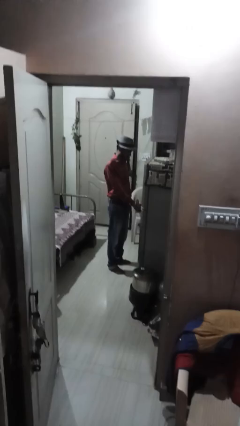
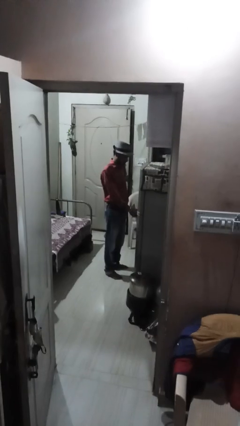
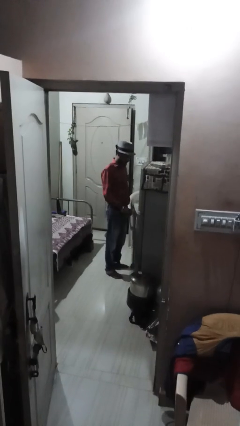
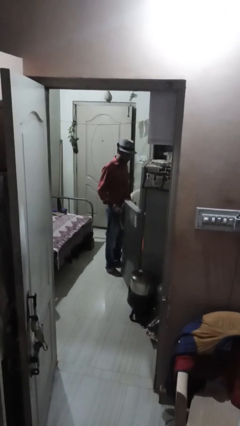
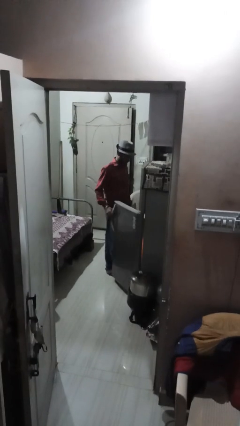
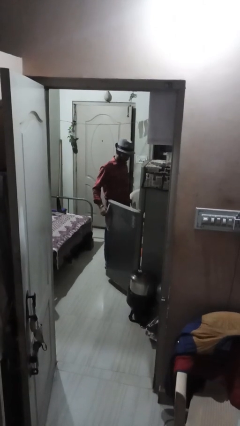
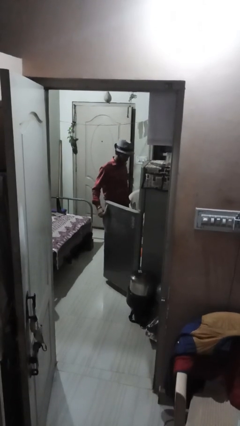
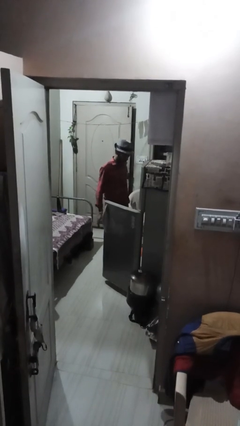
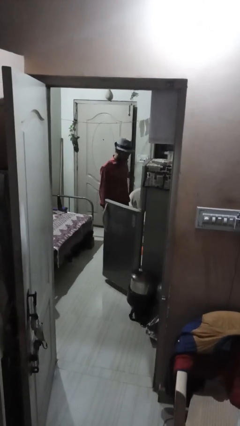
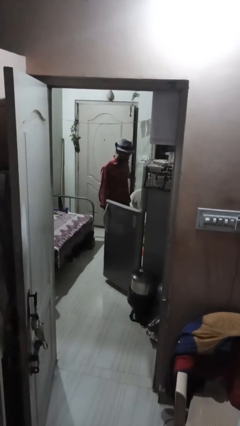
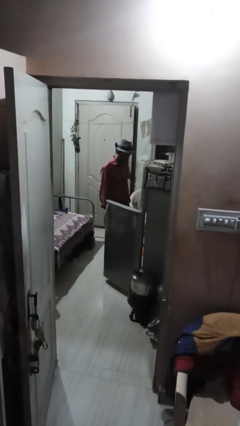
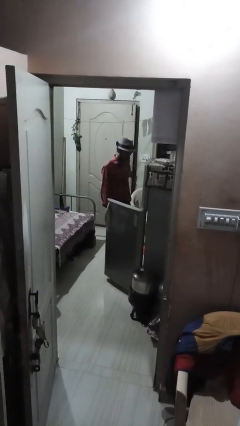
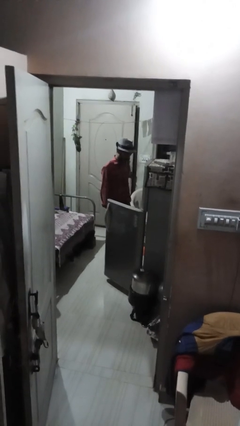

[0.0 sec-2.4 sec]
person opens refrigerator

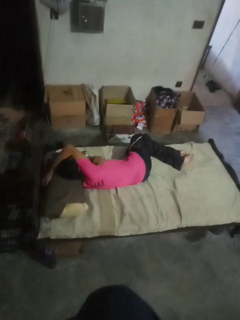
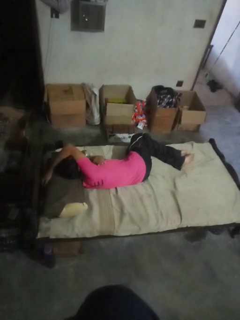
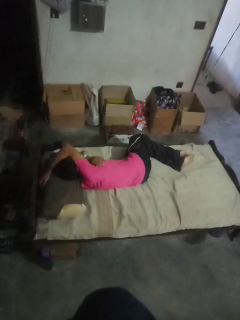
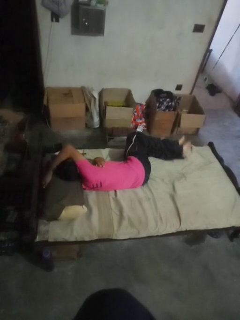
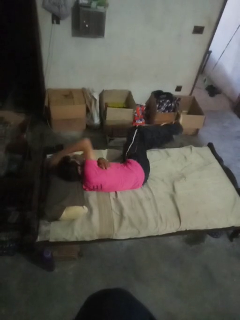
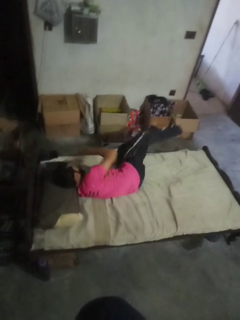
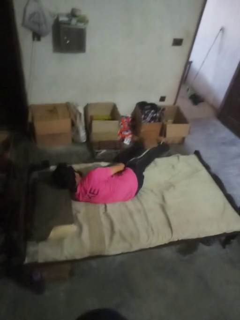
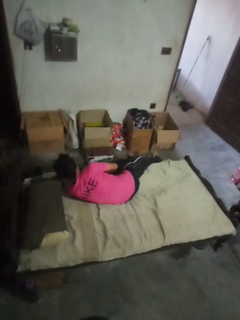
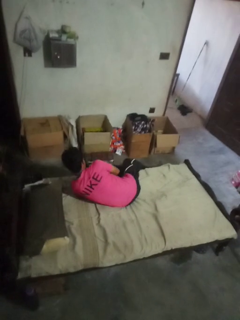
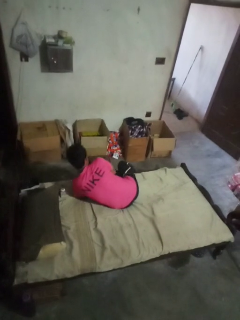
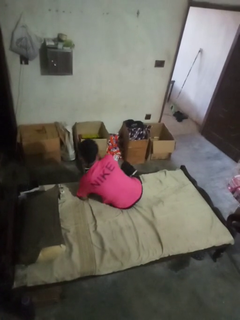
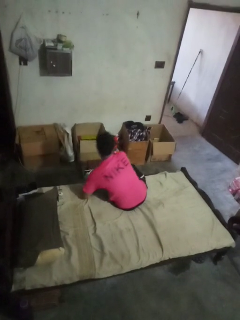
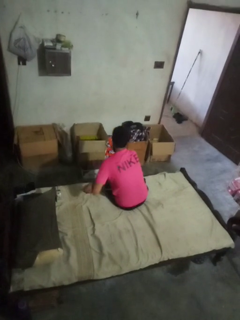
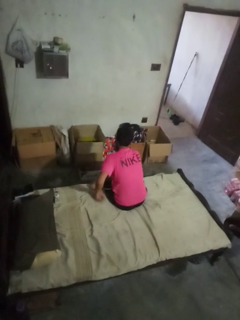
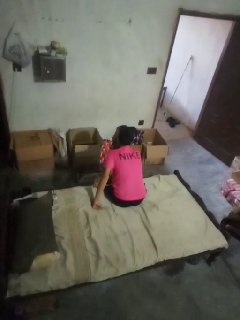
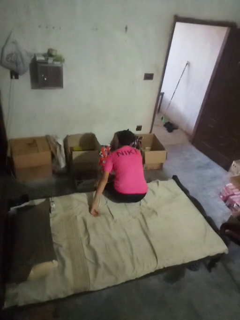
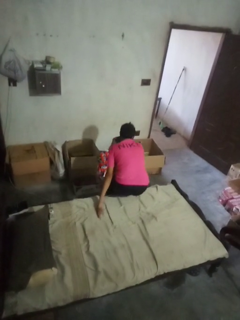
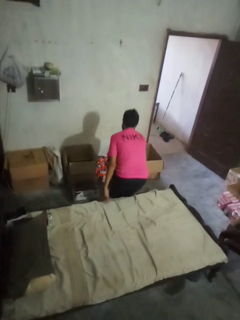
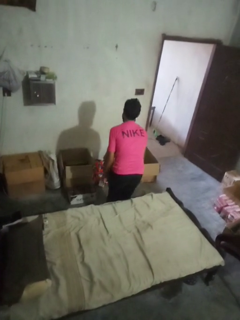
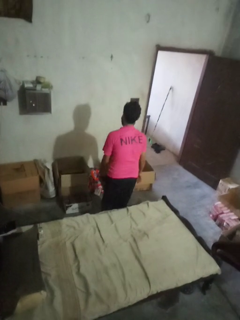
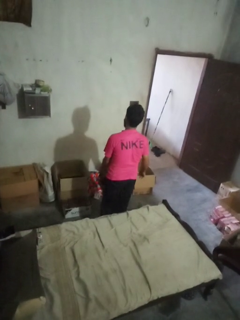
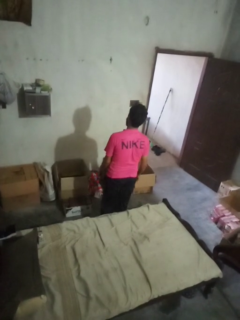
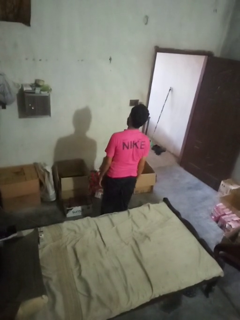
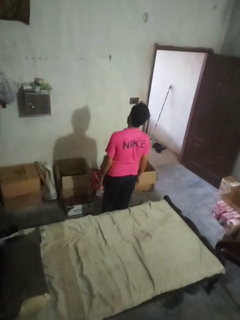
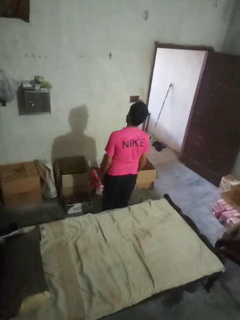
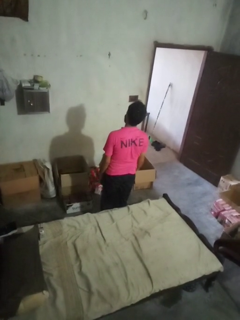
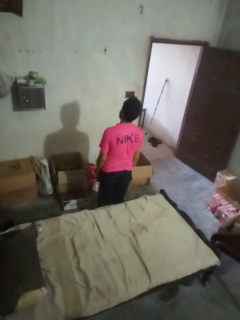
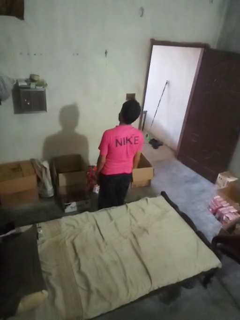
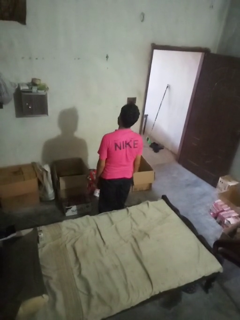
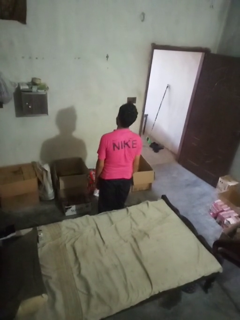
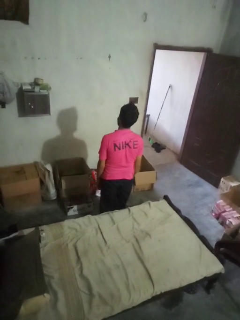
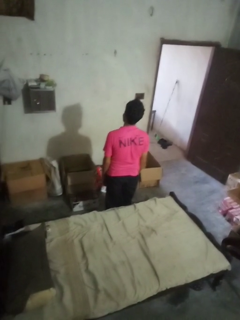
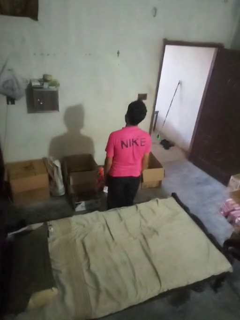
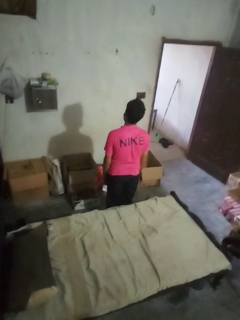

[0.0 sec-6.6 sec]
person stands up

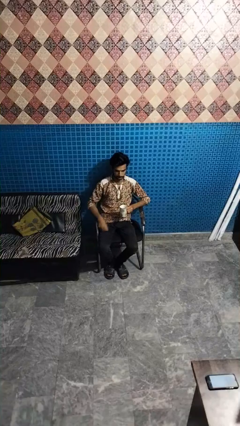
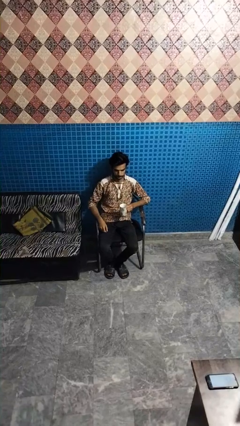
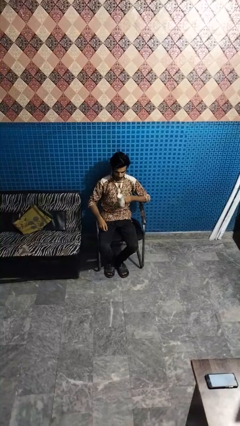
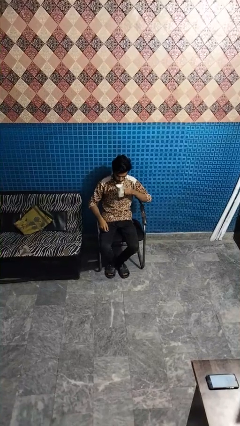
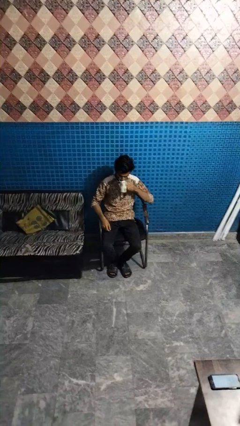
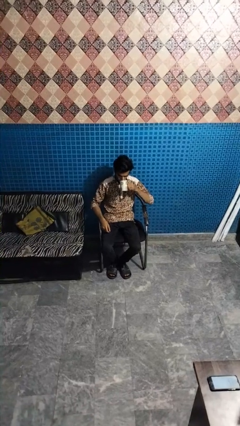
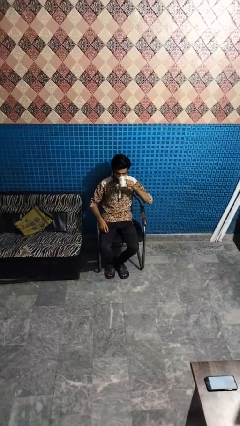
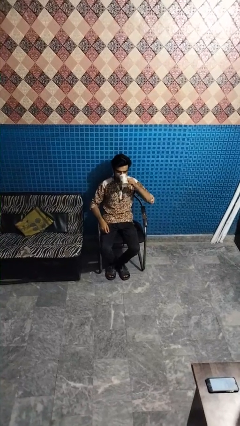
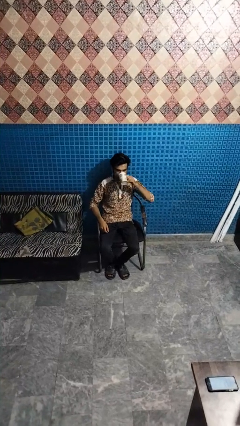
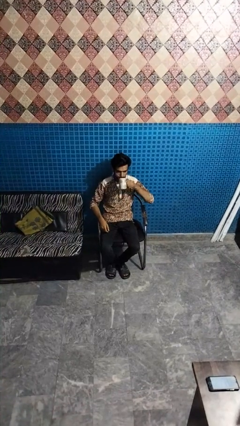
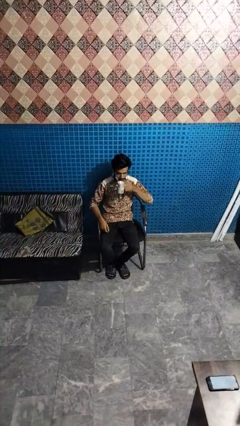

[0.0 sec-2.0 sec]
person drinks from mug

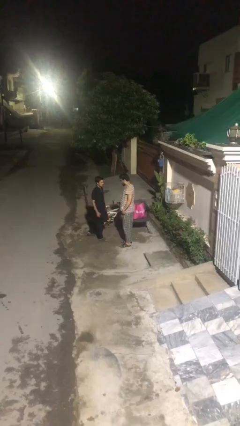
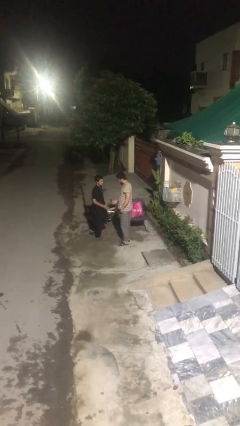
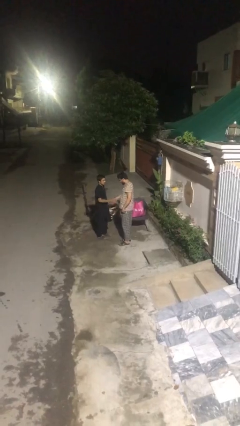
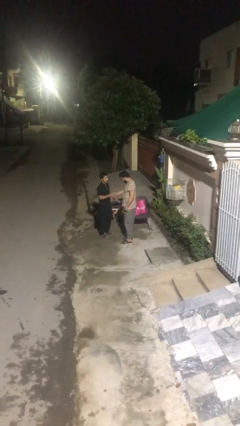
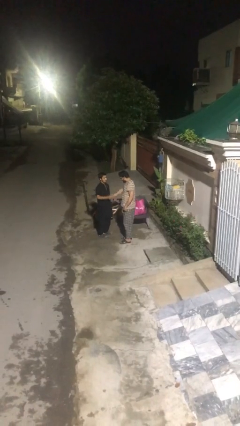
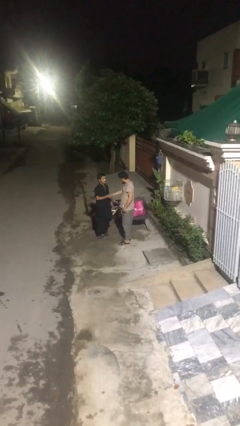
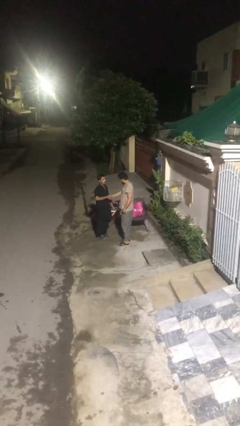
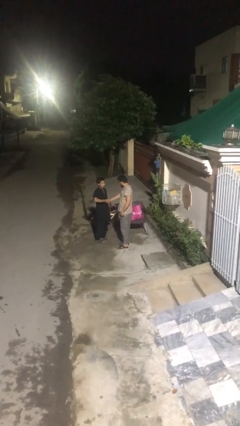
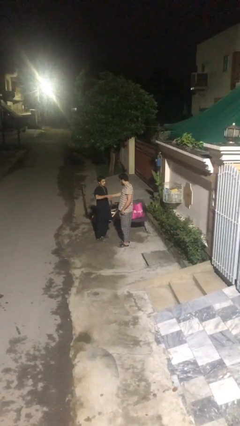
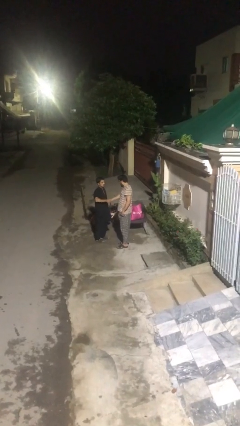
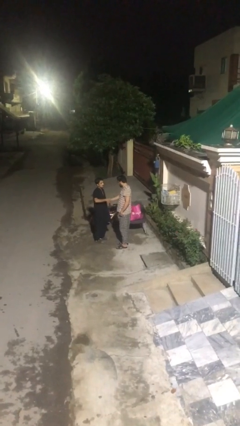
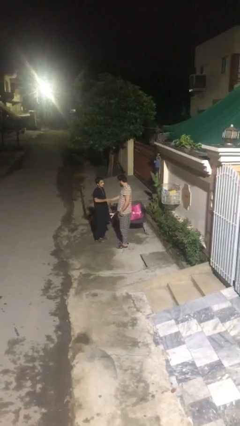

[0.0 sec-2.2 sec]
person shakes hand

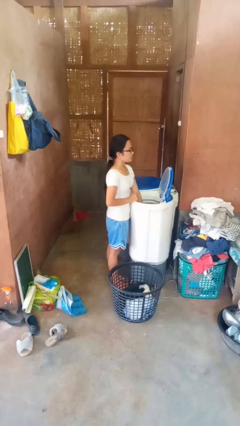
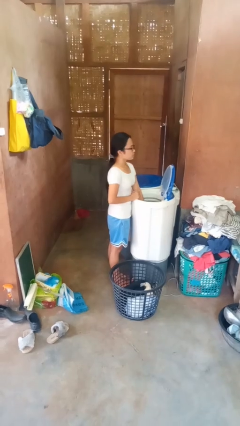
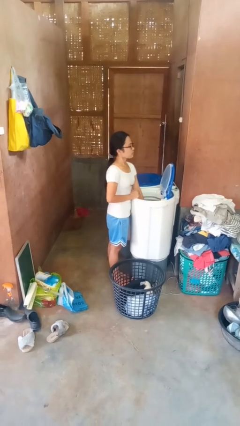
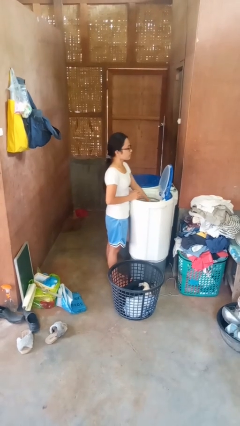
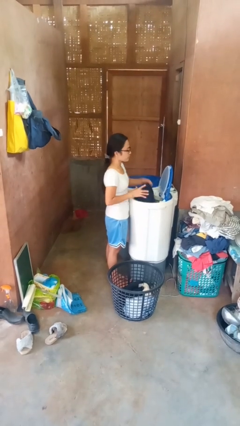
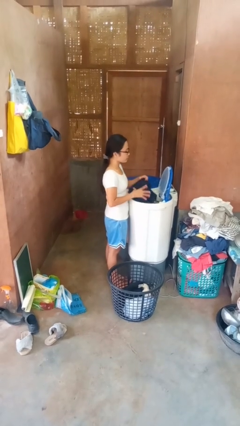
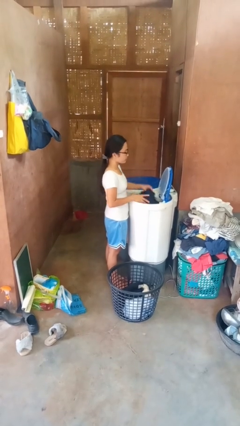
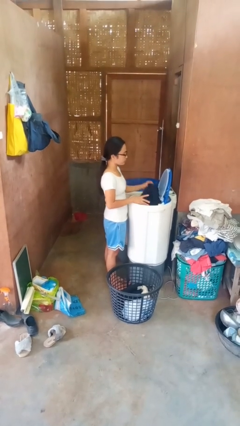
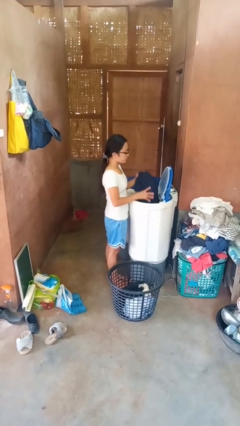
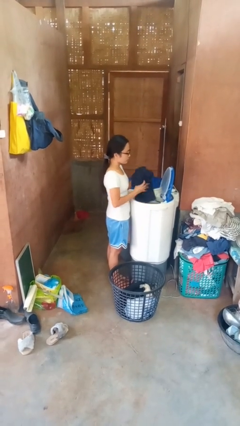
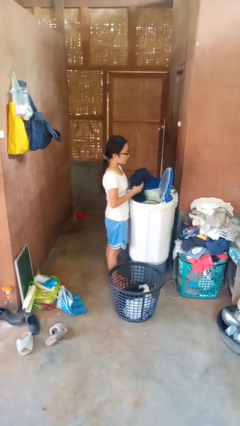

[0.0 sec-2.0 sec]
person unloads dryer

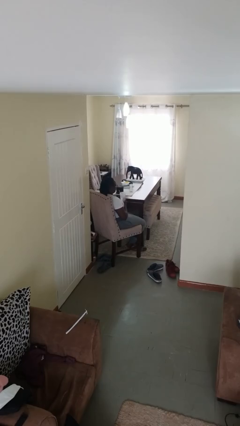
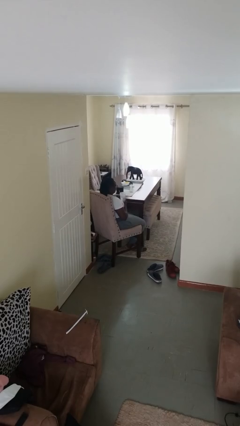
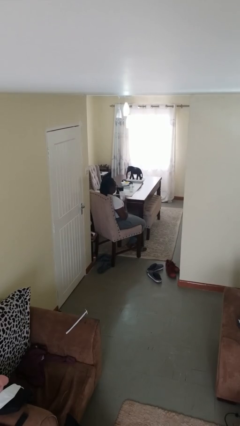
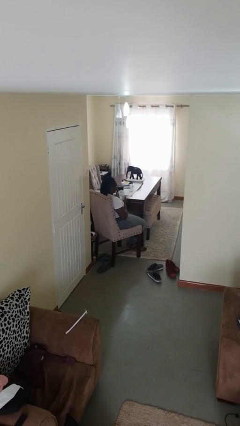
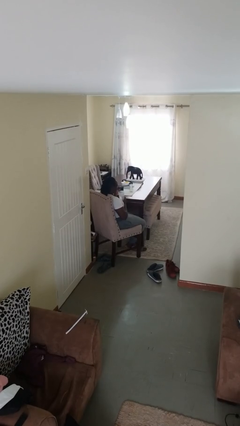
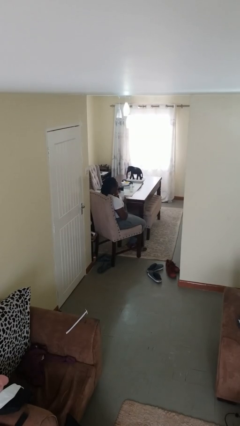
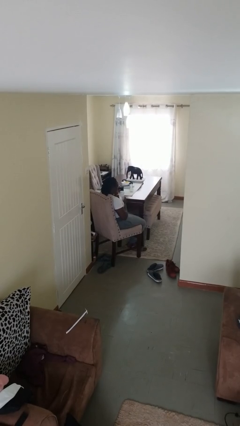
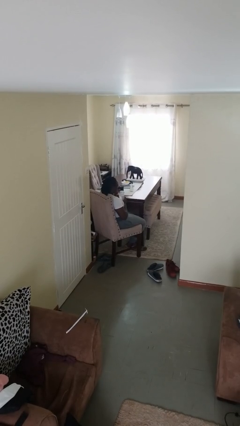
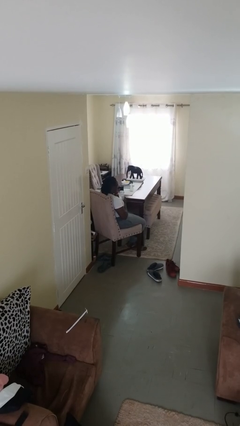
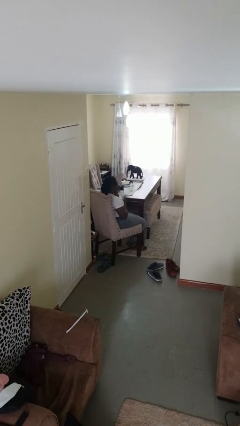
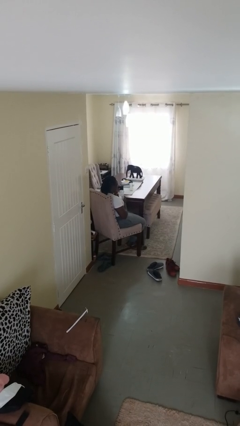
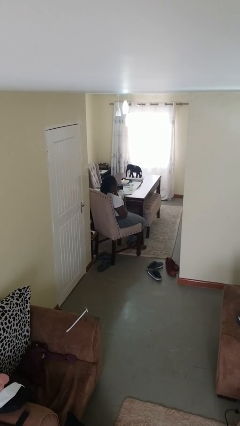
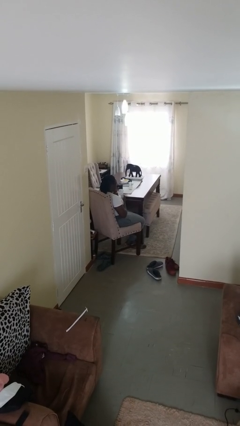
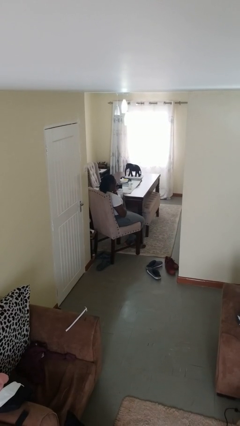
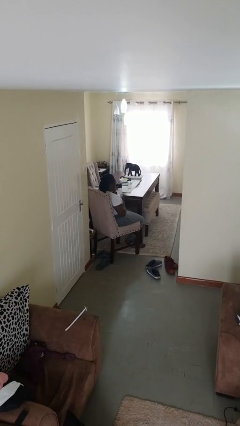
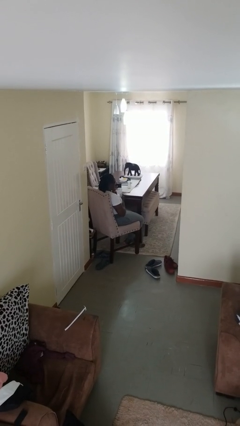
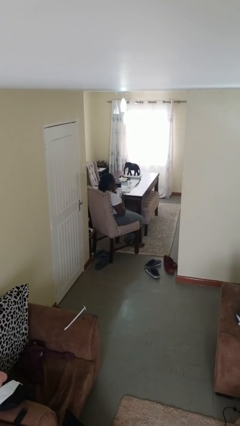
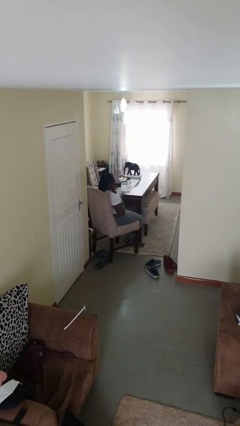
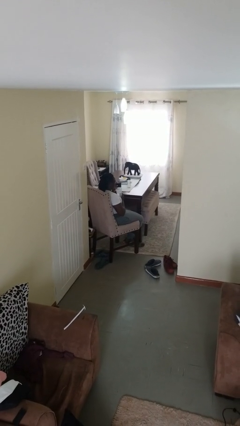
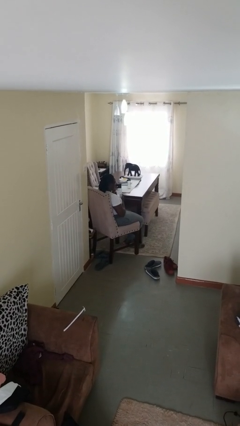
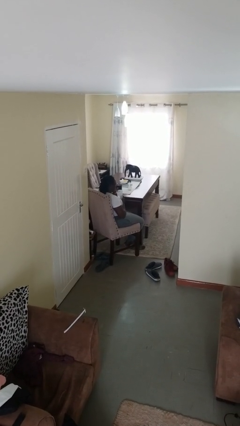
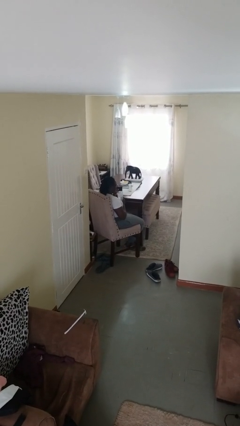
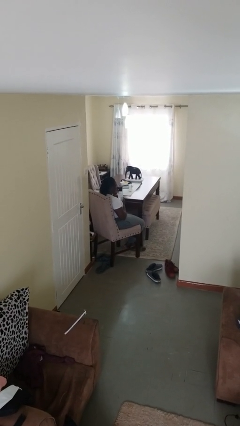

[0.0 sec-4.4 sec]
person drinks from straw
